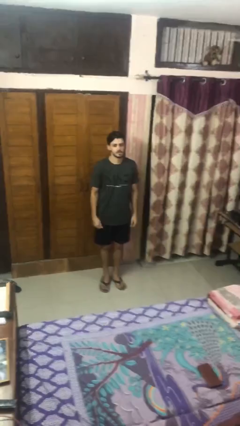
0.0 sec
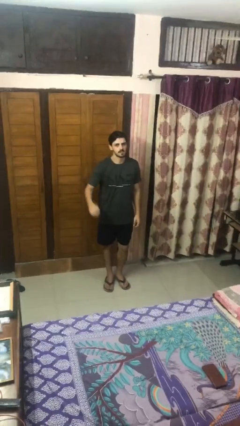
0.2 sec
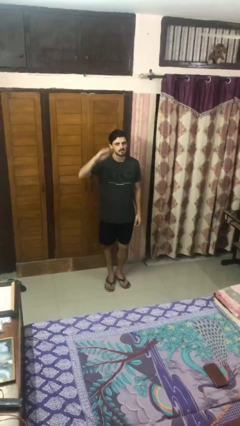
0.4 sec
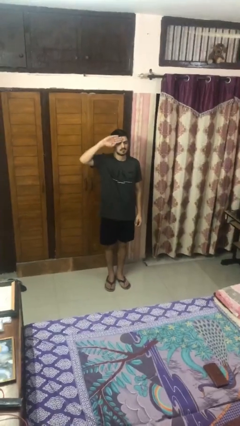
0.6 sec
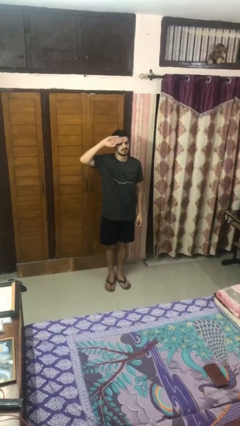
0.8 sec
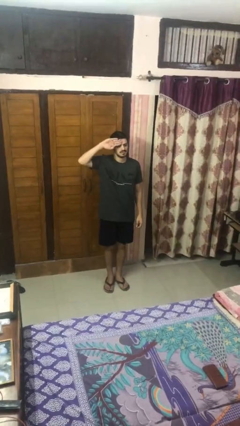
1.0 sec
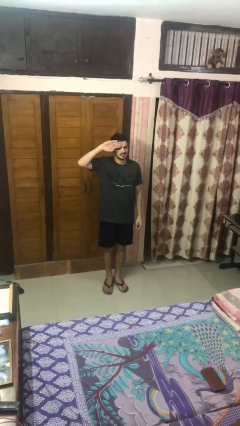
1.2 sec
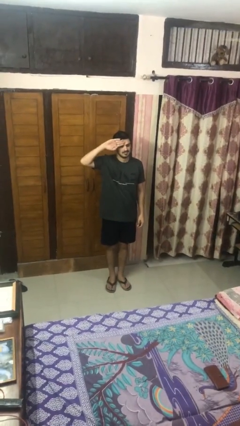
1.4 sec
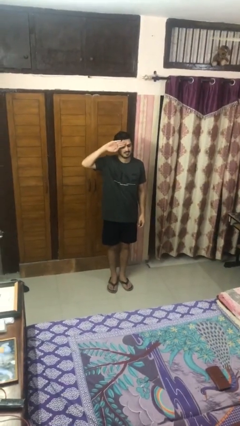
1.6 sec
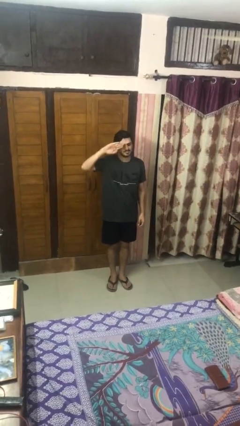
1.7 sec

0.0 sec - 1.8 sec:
person salutes

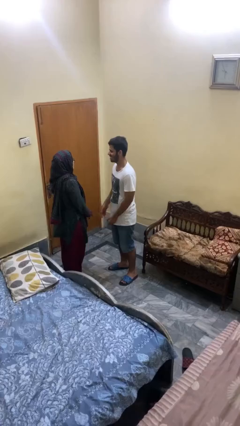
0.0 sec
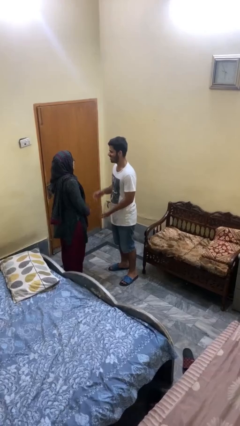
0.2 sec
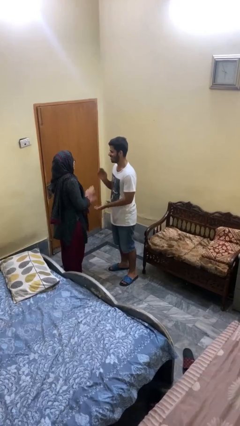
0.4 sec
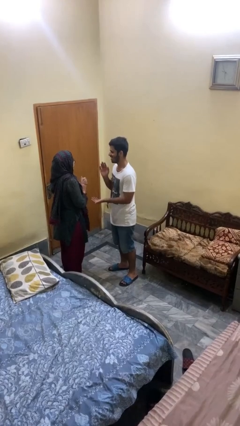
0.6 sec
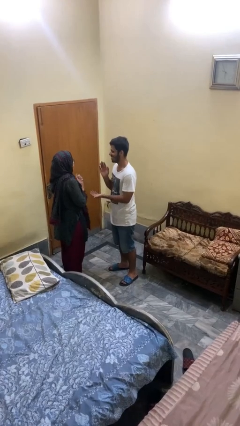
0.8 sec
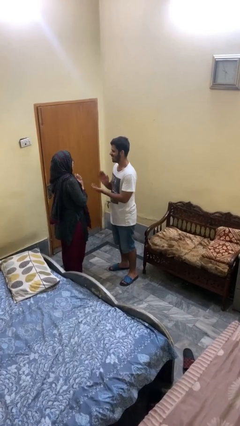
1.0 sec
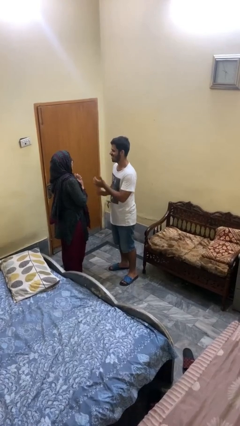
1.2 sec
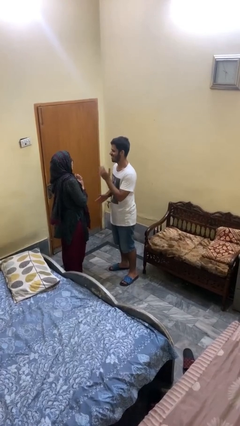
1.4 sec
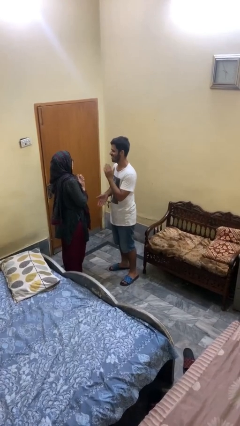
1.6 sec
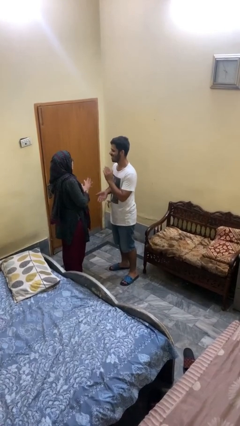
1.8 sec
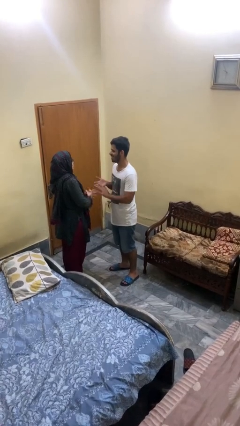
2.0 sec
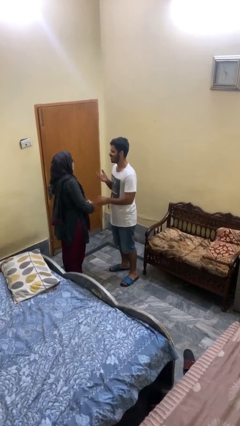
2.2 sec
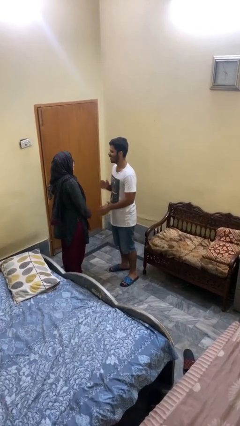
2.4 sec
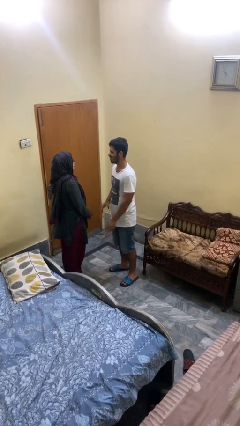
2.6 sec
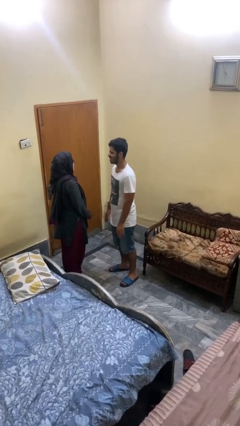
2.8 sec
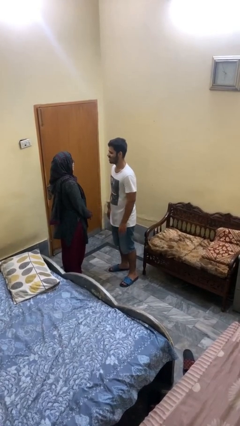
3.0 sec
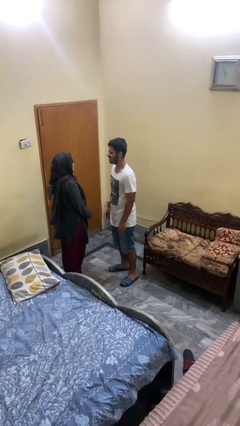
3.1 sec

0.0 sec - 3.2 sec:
person laughs with person

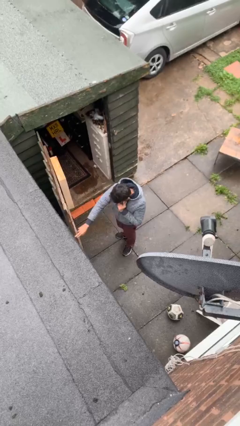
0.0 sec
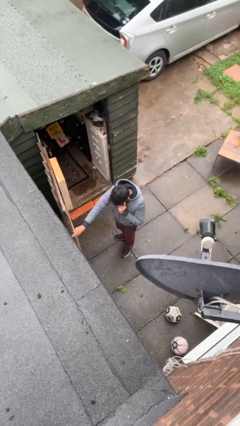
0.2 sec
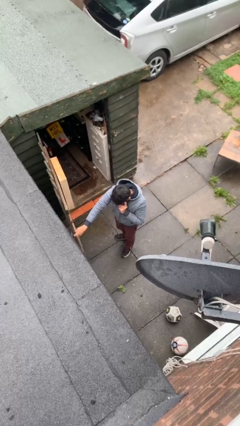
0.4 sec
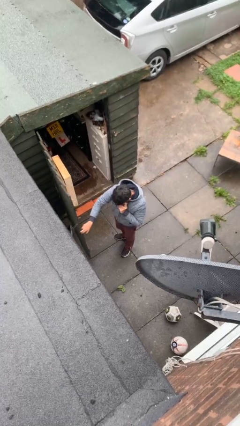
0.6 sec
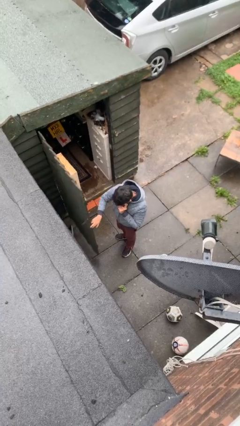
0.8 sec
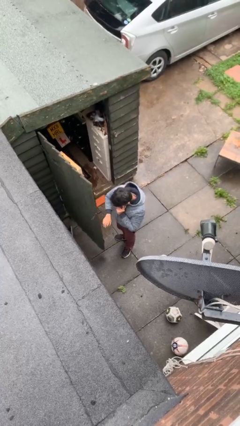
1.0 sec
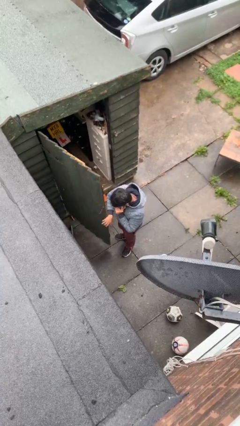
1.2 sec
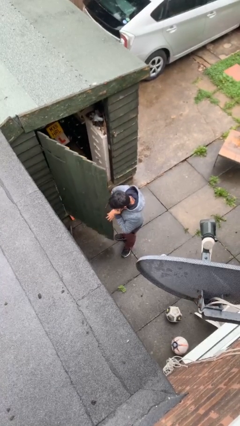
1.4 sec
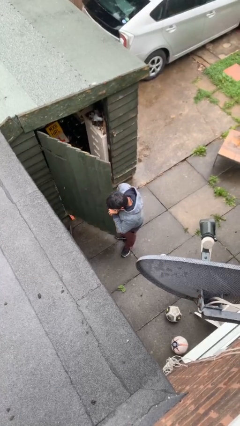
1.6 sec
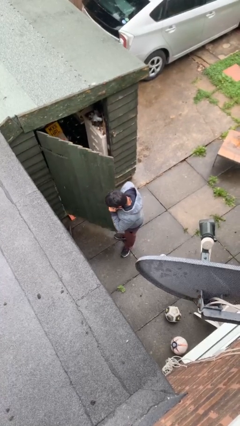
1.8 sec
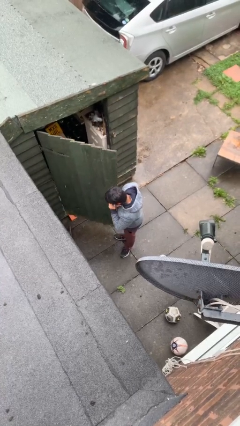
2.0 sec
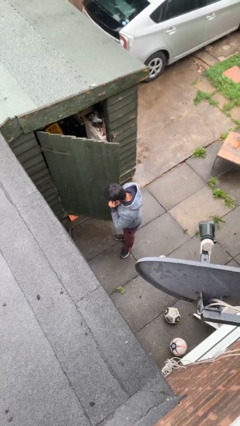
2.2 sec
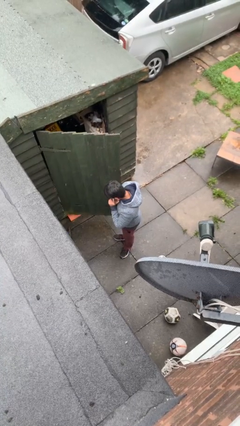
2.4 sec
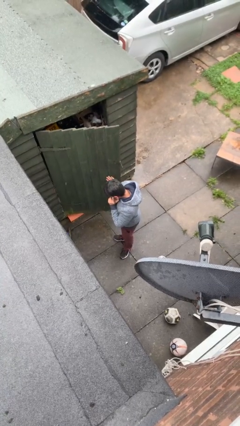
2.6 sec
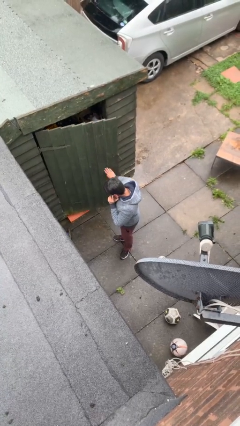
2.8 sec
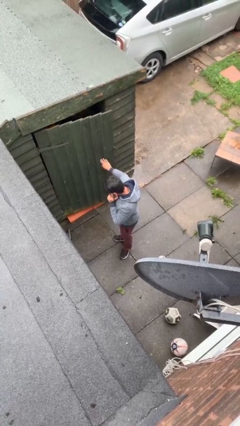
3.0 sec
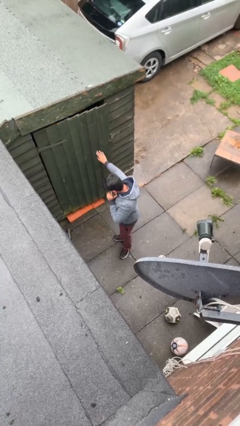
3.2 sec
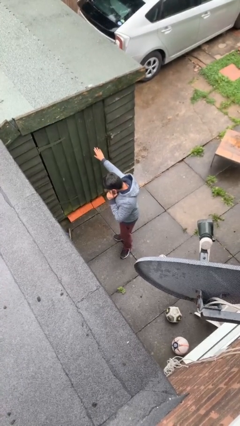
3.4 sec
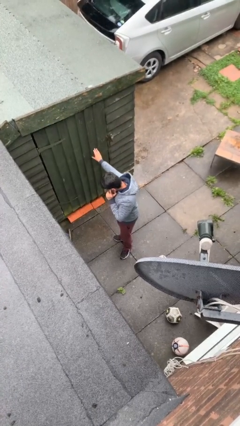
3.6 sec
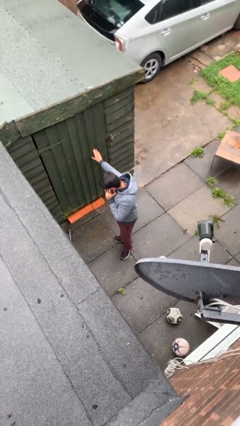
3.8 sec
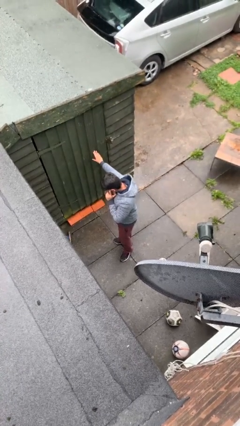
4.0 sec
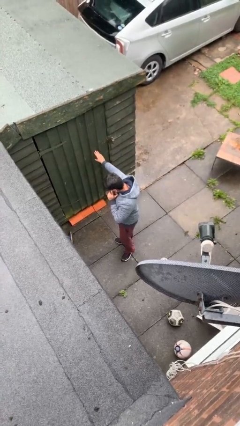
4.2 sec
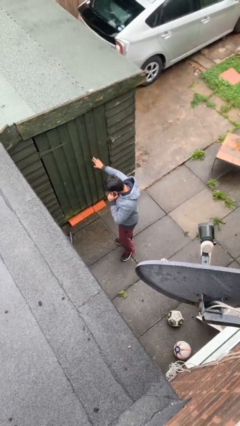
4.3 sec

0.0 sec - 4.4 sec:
person closes facility door

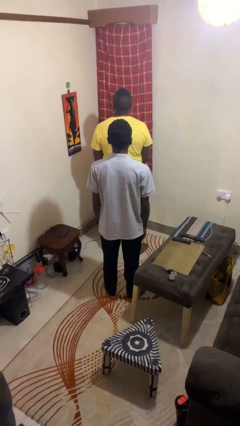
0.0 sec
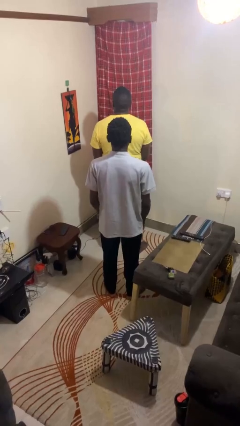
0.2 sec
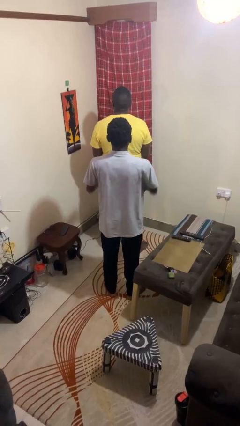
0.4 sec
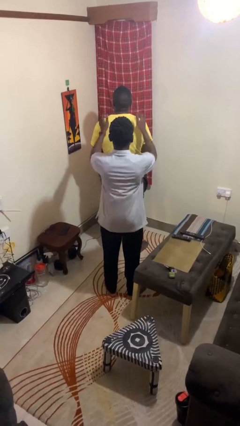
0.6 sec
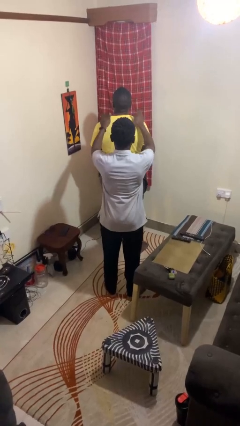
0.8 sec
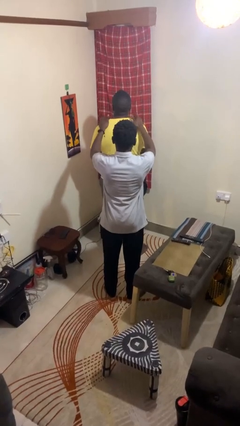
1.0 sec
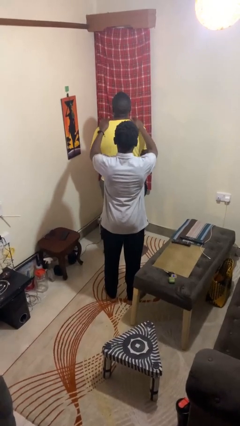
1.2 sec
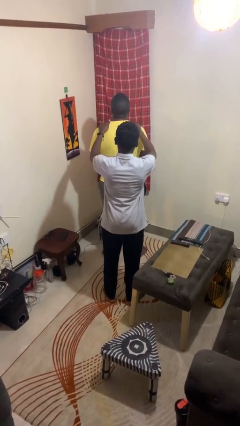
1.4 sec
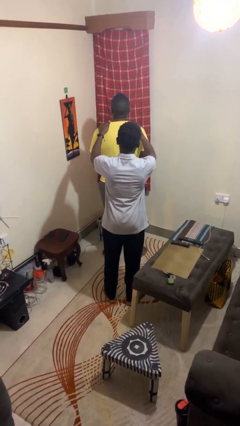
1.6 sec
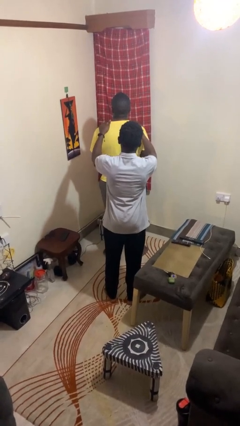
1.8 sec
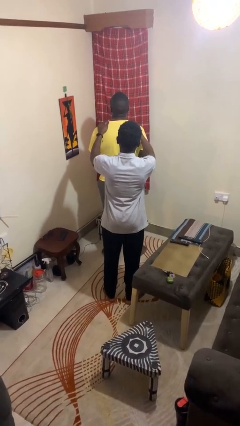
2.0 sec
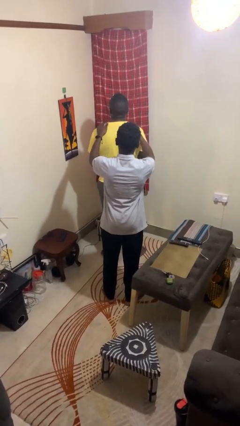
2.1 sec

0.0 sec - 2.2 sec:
person touches back of person

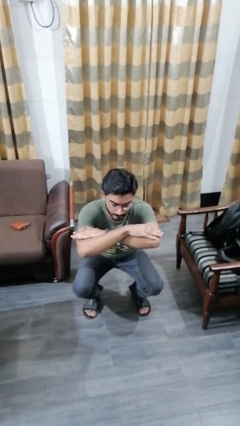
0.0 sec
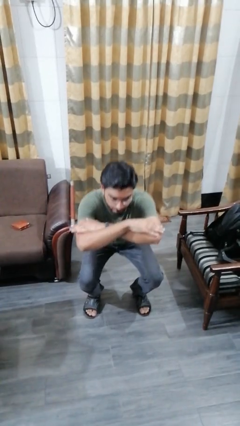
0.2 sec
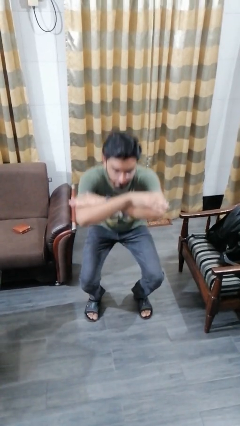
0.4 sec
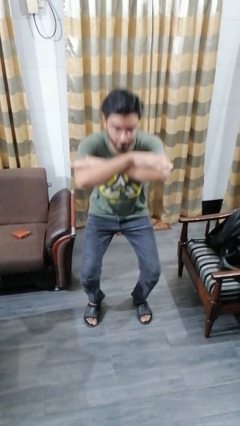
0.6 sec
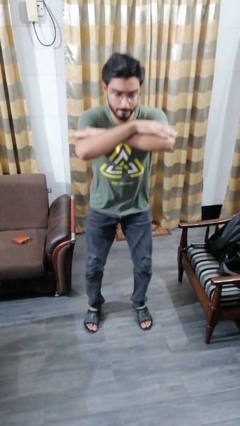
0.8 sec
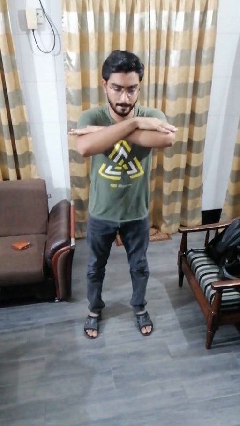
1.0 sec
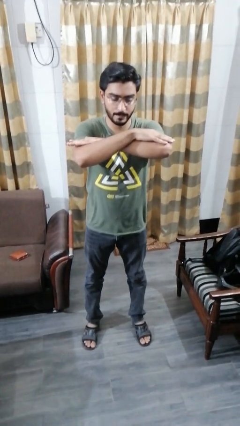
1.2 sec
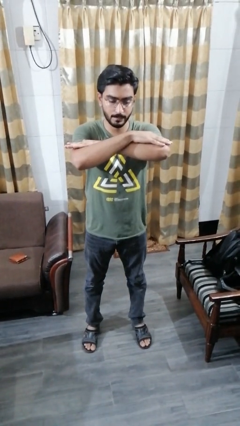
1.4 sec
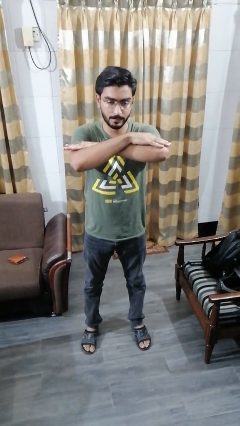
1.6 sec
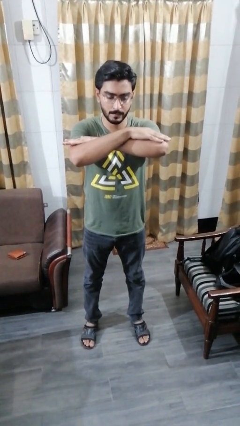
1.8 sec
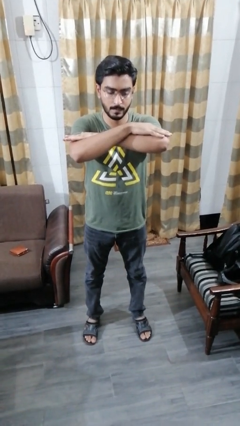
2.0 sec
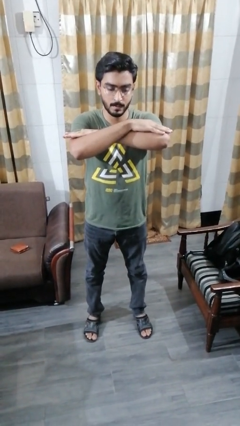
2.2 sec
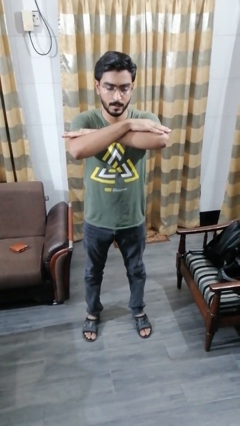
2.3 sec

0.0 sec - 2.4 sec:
person stands up

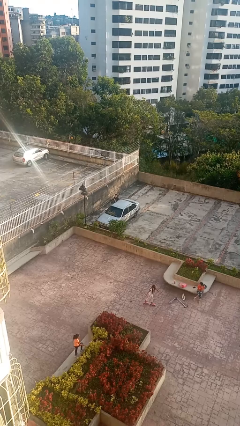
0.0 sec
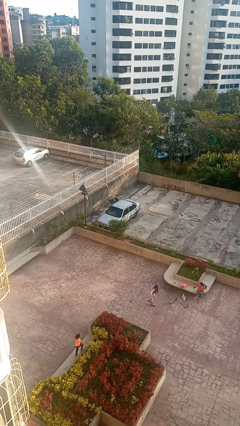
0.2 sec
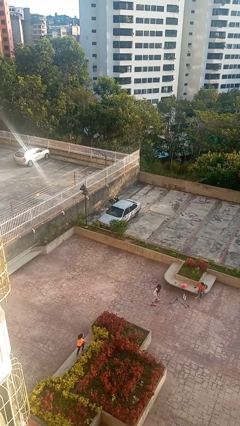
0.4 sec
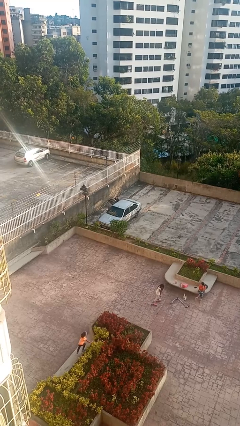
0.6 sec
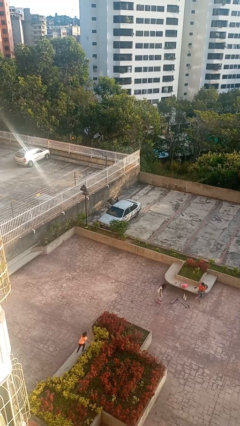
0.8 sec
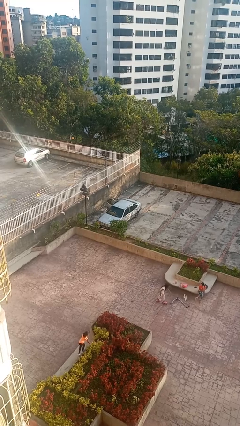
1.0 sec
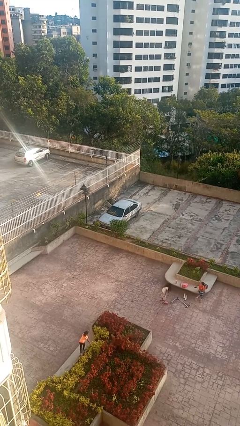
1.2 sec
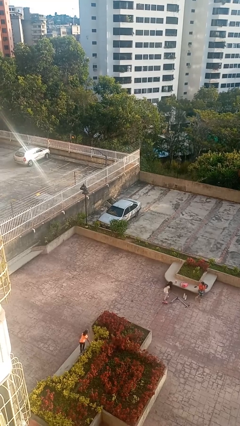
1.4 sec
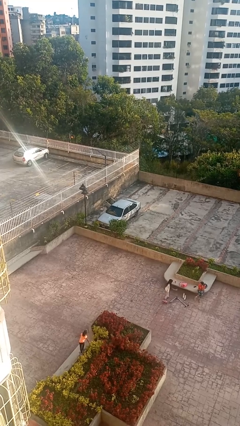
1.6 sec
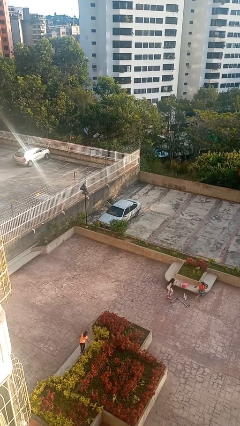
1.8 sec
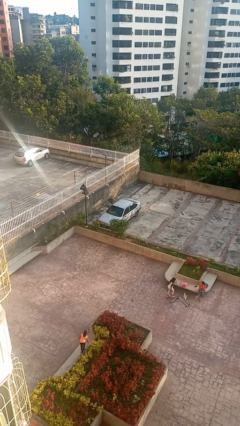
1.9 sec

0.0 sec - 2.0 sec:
car picks up person

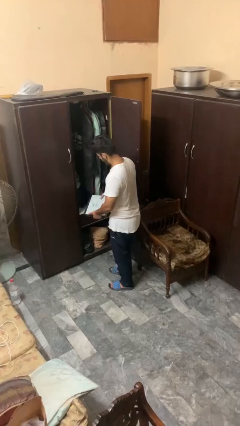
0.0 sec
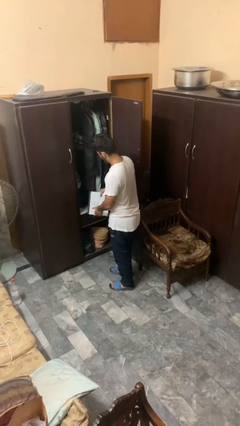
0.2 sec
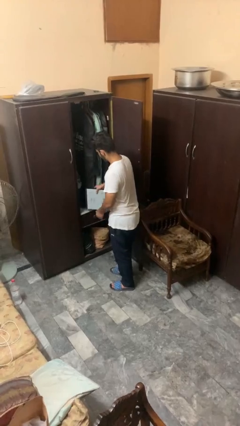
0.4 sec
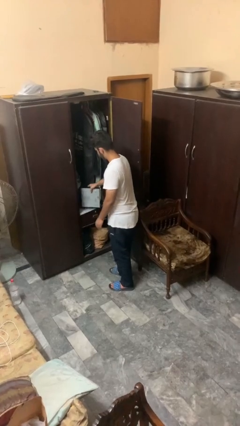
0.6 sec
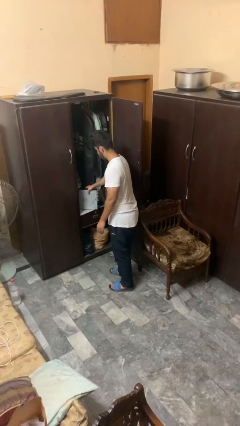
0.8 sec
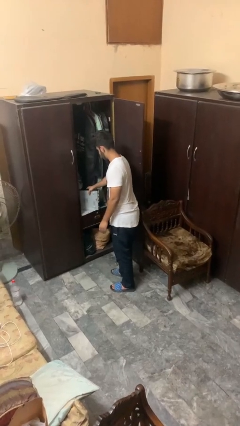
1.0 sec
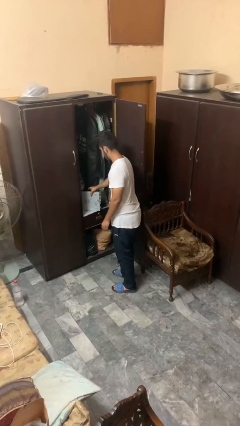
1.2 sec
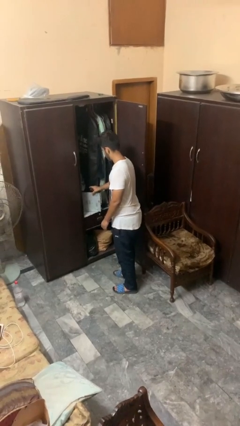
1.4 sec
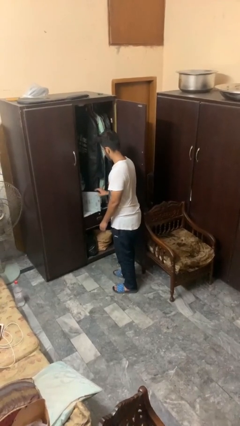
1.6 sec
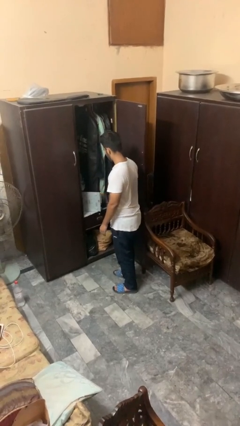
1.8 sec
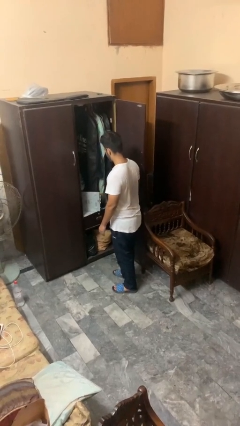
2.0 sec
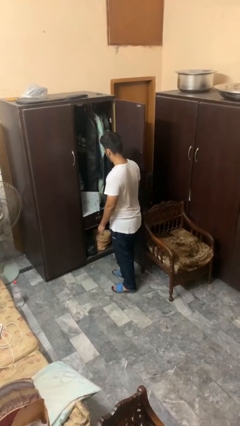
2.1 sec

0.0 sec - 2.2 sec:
person puts down object on countertop
